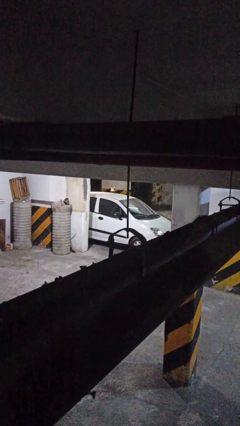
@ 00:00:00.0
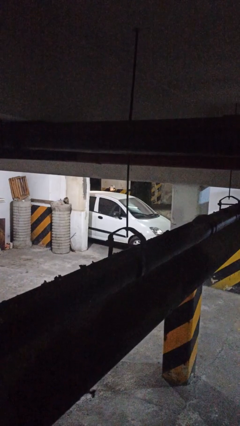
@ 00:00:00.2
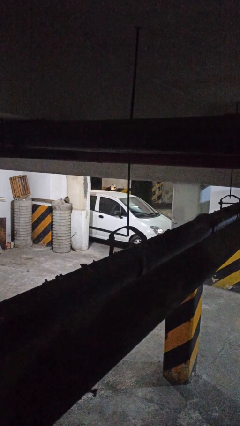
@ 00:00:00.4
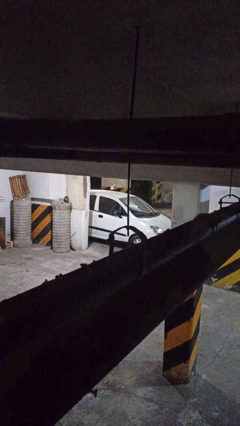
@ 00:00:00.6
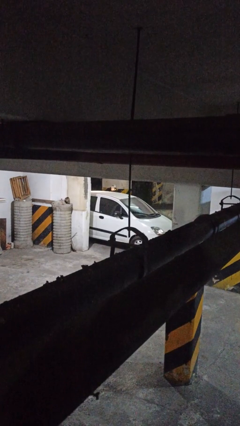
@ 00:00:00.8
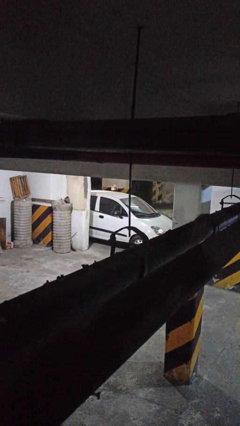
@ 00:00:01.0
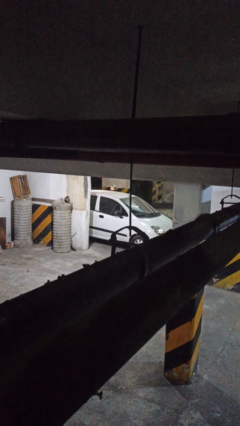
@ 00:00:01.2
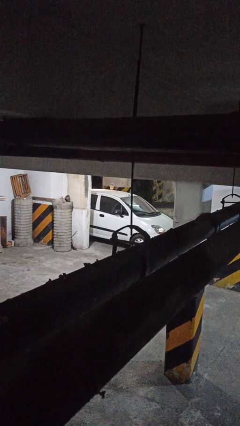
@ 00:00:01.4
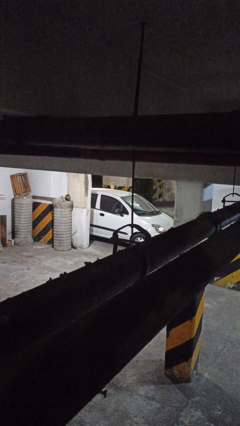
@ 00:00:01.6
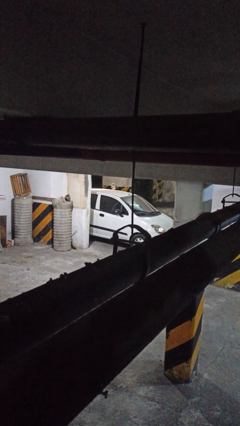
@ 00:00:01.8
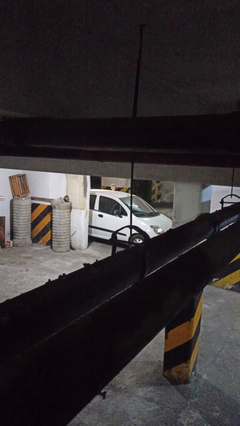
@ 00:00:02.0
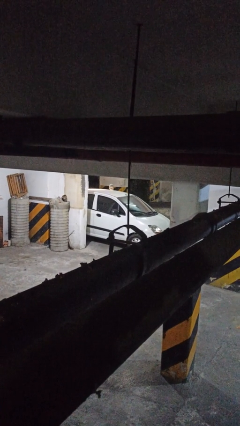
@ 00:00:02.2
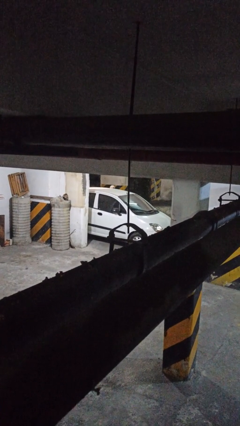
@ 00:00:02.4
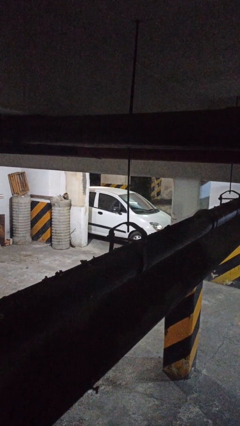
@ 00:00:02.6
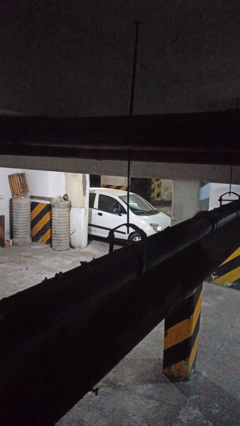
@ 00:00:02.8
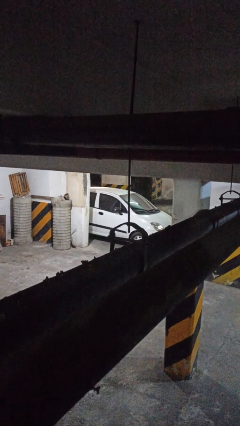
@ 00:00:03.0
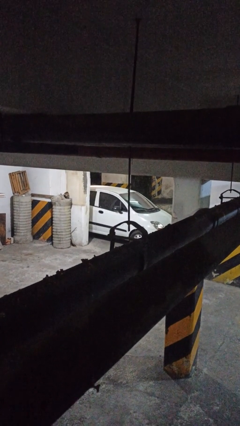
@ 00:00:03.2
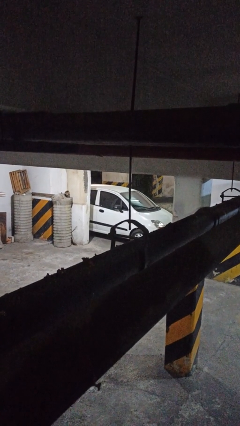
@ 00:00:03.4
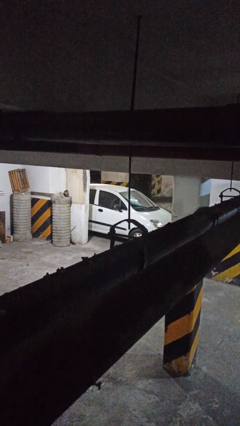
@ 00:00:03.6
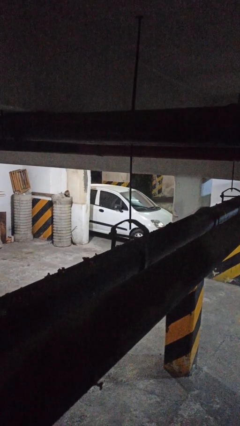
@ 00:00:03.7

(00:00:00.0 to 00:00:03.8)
car picks up person

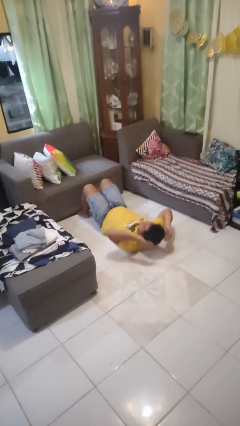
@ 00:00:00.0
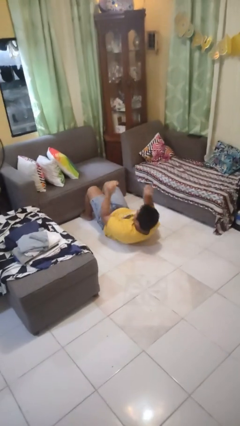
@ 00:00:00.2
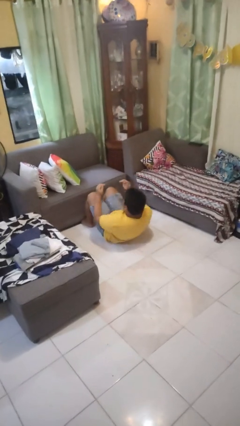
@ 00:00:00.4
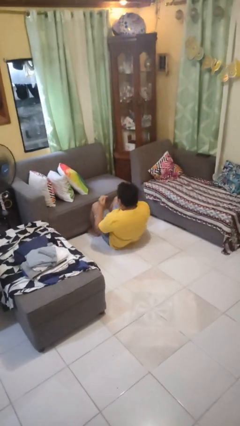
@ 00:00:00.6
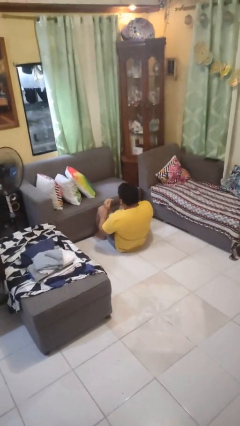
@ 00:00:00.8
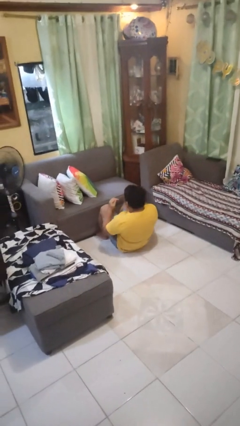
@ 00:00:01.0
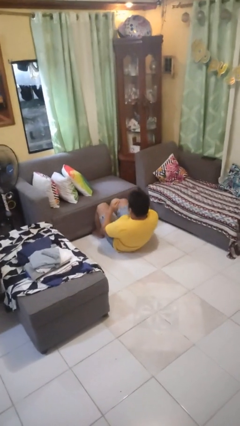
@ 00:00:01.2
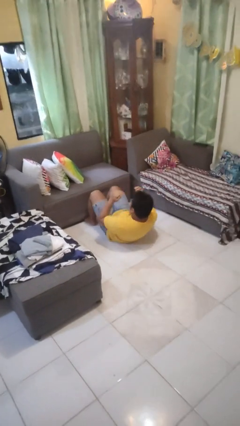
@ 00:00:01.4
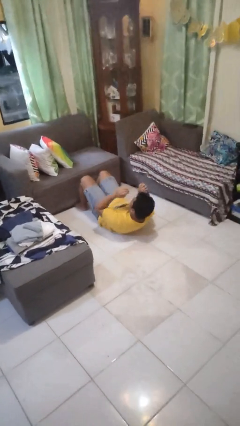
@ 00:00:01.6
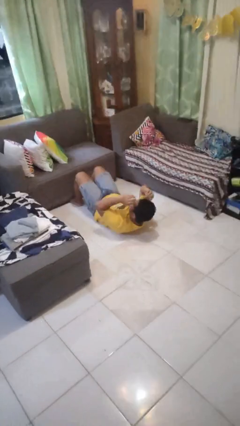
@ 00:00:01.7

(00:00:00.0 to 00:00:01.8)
person exercises with situp

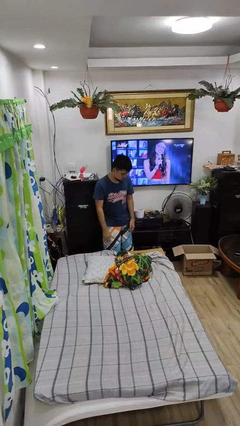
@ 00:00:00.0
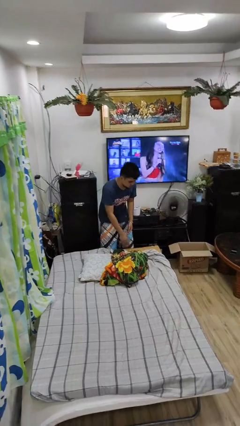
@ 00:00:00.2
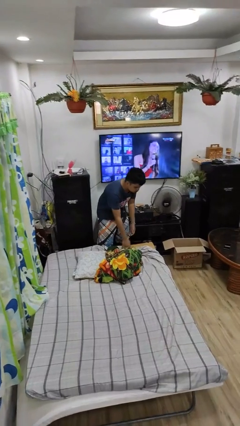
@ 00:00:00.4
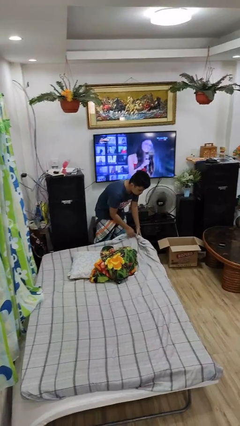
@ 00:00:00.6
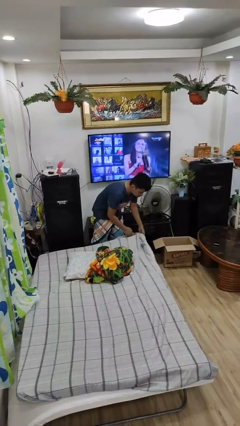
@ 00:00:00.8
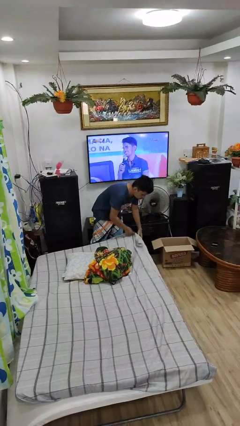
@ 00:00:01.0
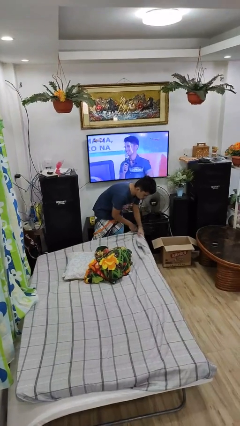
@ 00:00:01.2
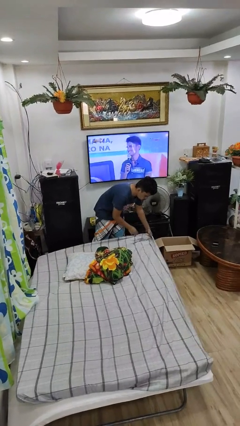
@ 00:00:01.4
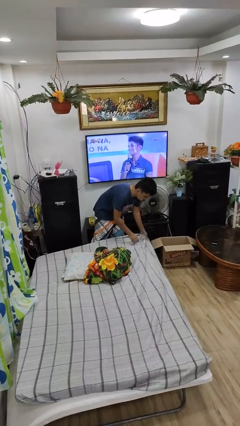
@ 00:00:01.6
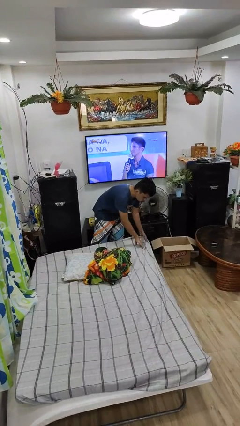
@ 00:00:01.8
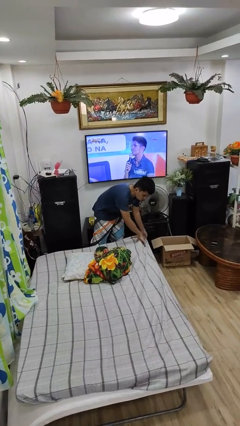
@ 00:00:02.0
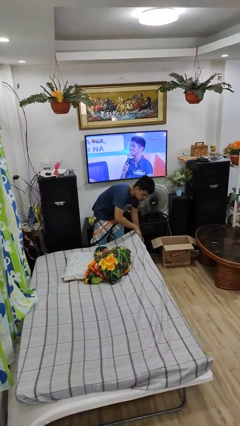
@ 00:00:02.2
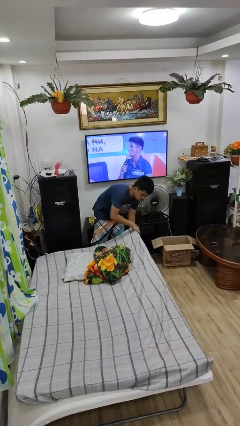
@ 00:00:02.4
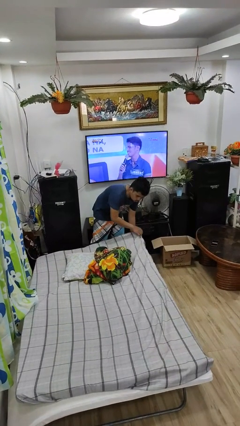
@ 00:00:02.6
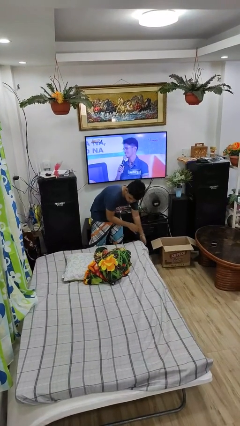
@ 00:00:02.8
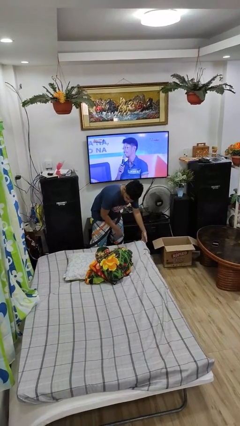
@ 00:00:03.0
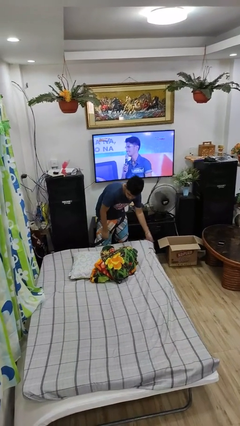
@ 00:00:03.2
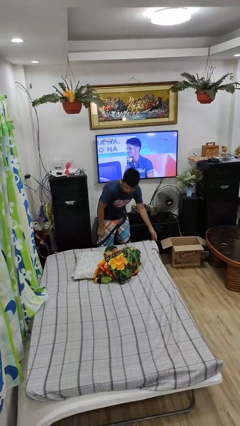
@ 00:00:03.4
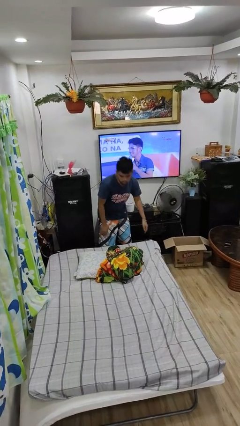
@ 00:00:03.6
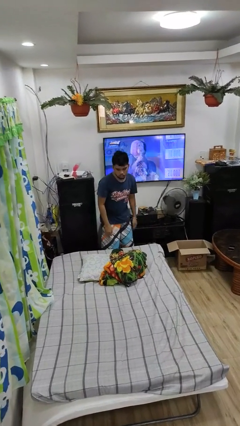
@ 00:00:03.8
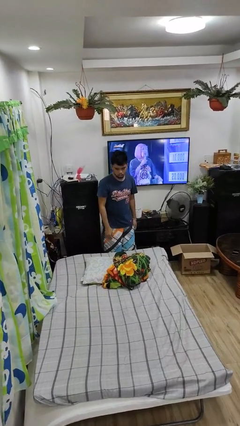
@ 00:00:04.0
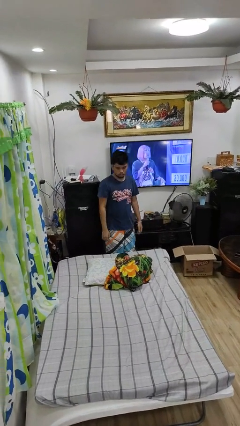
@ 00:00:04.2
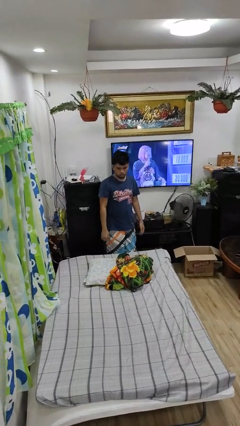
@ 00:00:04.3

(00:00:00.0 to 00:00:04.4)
person makes bed

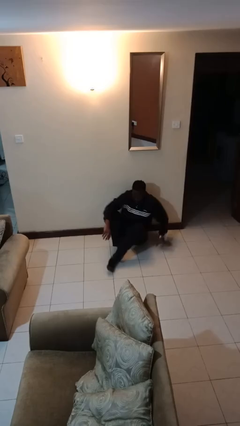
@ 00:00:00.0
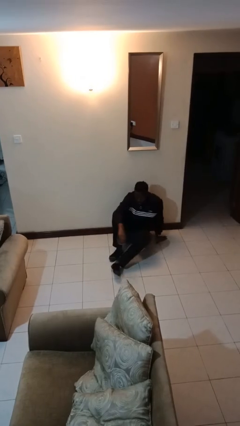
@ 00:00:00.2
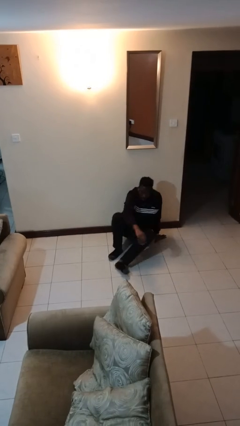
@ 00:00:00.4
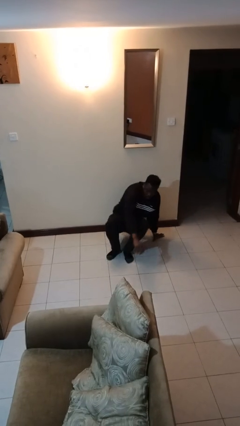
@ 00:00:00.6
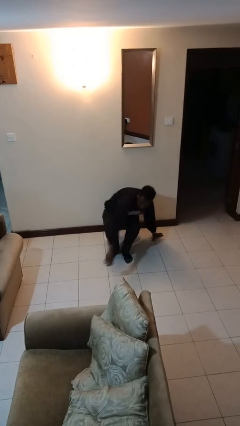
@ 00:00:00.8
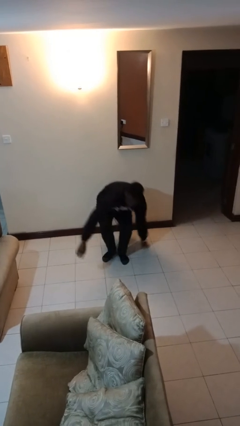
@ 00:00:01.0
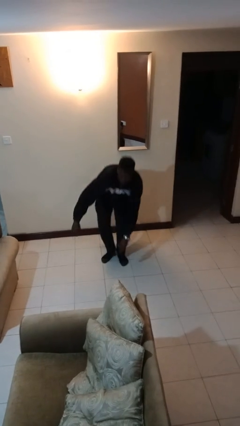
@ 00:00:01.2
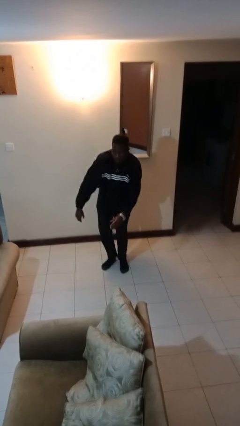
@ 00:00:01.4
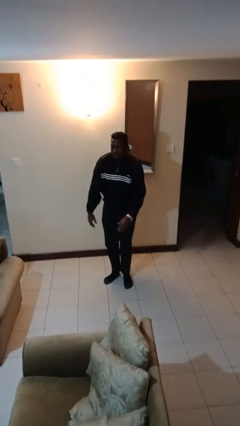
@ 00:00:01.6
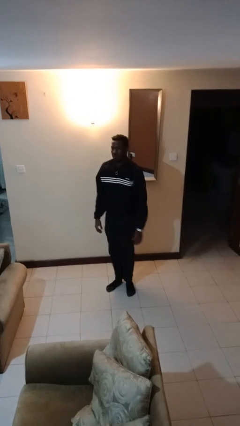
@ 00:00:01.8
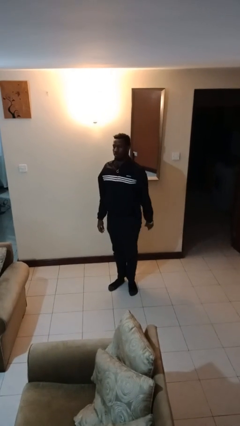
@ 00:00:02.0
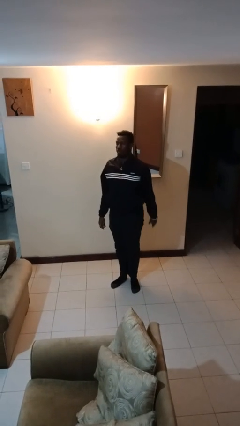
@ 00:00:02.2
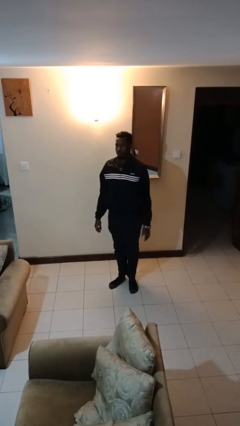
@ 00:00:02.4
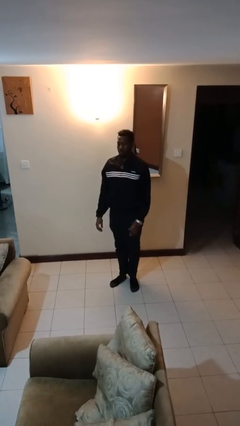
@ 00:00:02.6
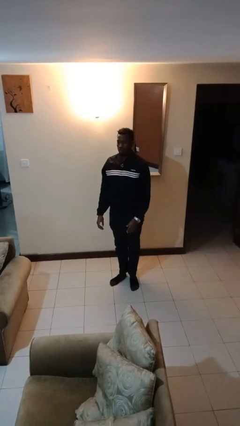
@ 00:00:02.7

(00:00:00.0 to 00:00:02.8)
person stands up from floor

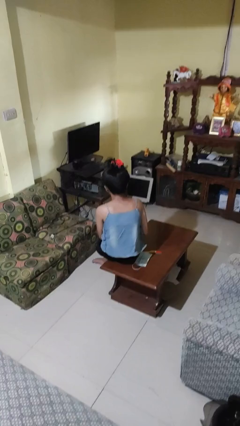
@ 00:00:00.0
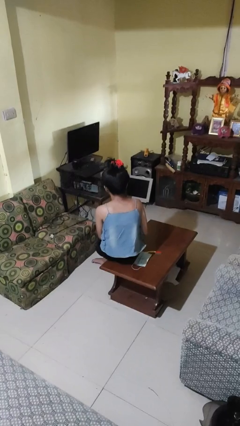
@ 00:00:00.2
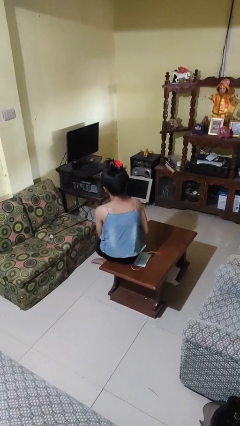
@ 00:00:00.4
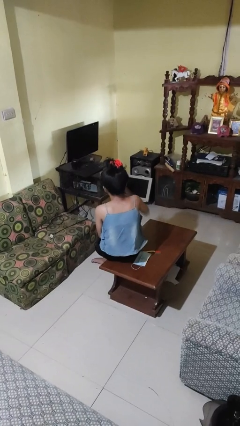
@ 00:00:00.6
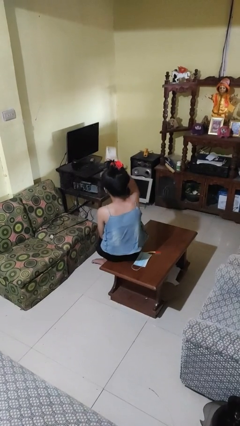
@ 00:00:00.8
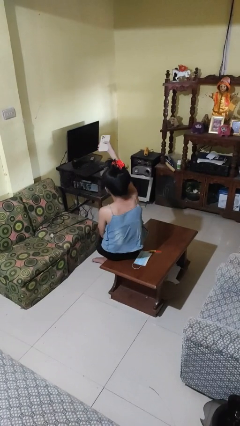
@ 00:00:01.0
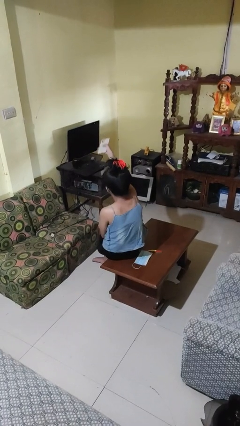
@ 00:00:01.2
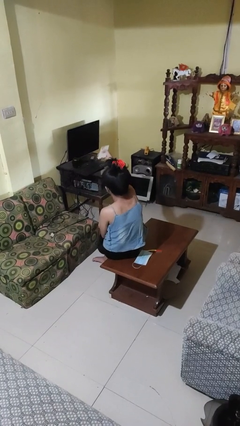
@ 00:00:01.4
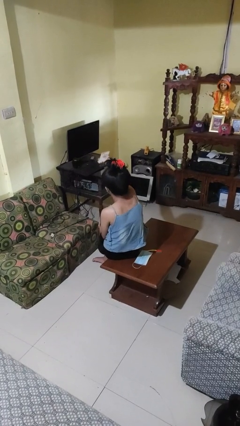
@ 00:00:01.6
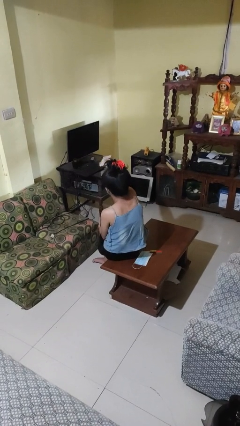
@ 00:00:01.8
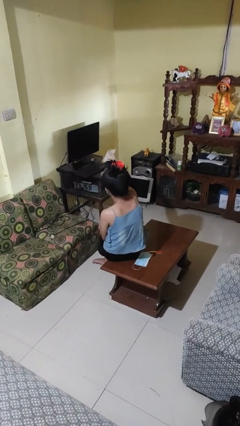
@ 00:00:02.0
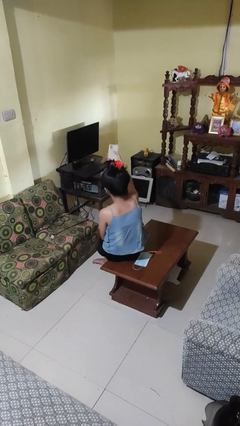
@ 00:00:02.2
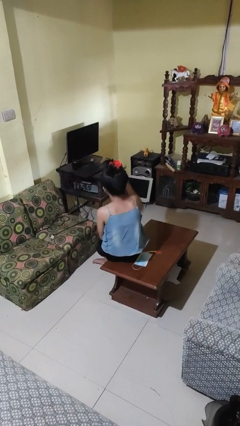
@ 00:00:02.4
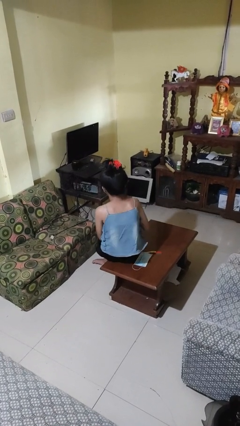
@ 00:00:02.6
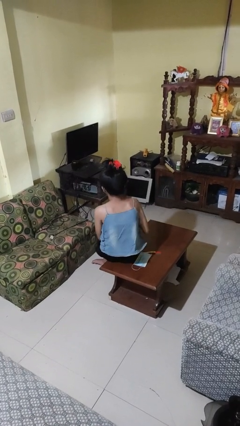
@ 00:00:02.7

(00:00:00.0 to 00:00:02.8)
person uses television remote

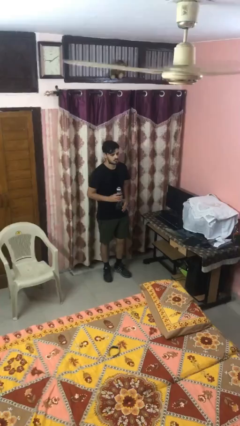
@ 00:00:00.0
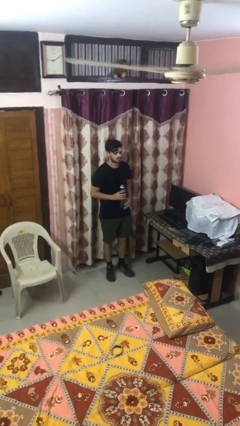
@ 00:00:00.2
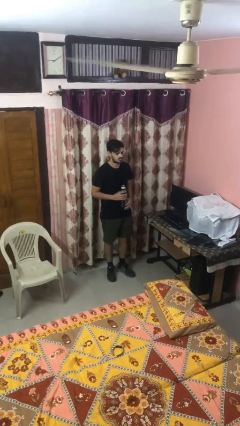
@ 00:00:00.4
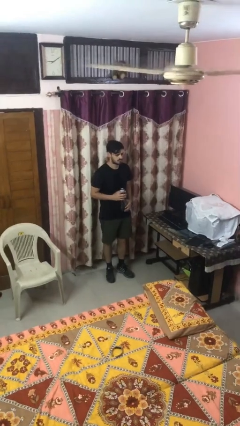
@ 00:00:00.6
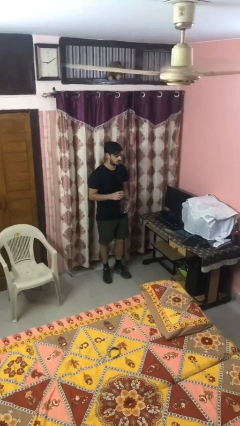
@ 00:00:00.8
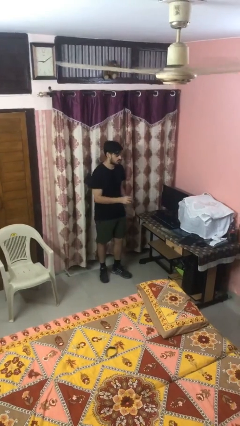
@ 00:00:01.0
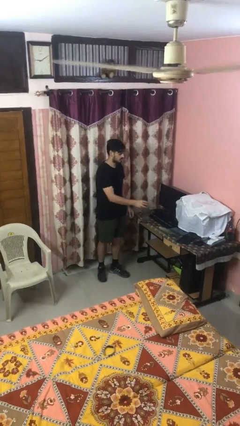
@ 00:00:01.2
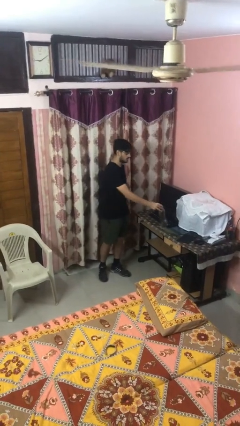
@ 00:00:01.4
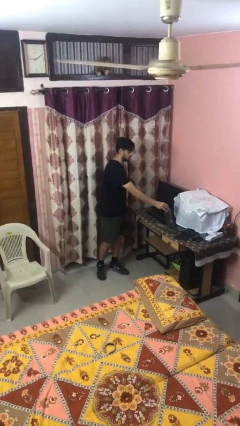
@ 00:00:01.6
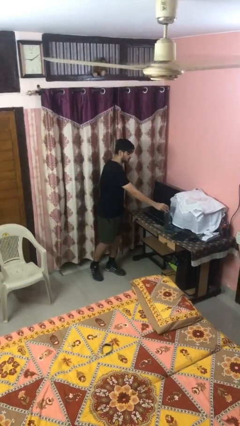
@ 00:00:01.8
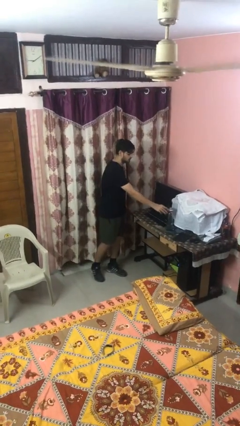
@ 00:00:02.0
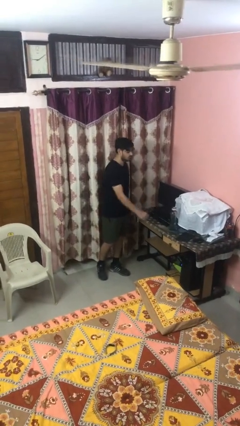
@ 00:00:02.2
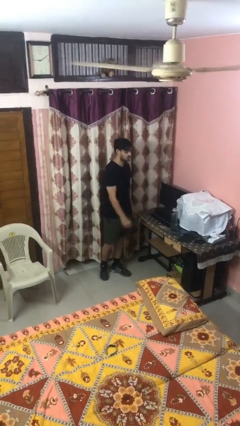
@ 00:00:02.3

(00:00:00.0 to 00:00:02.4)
person puts down object on countertop
